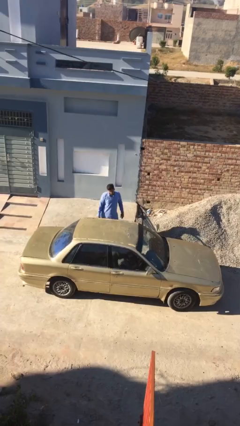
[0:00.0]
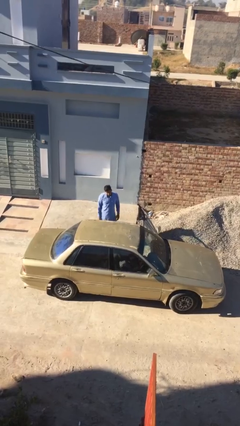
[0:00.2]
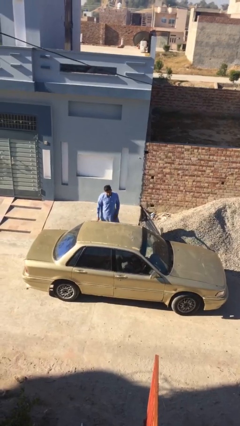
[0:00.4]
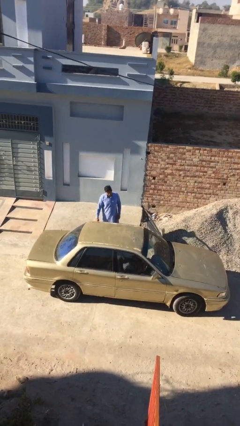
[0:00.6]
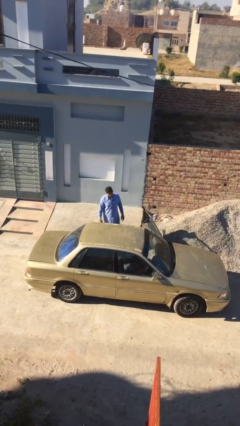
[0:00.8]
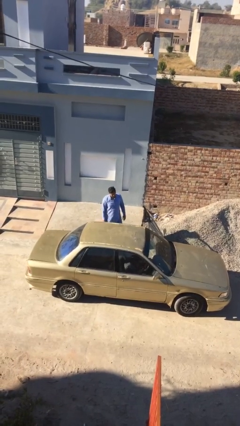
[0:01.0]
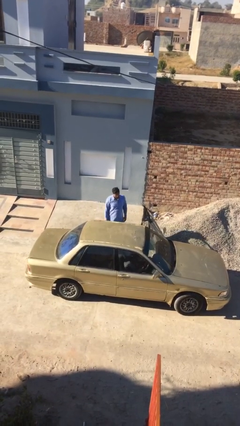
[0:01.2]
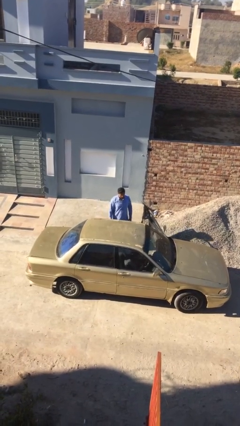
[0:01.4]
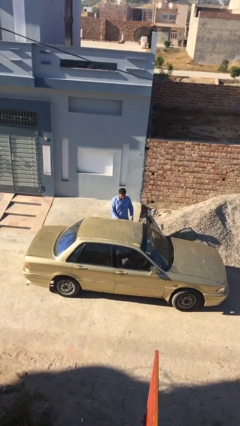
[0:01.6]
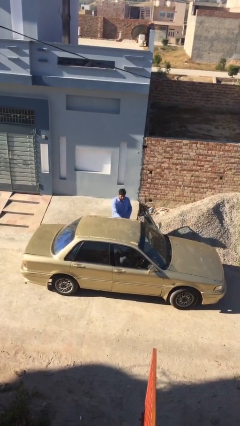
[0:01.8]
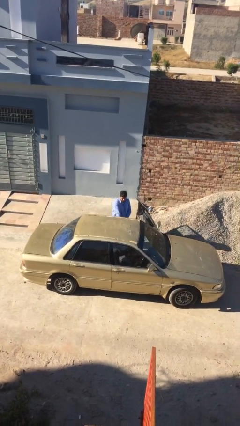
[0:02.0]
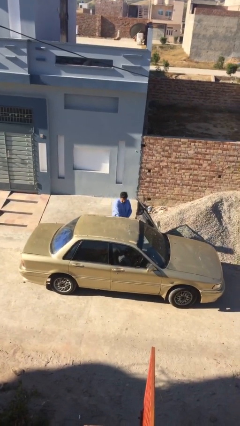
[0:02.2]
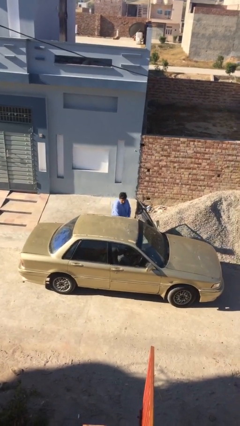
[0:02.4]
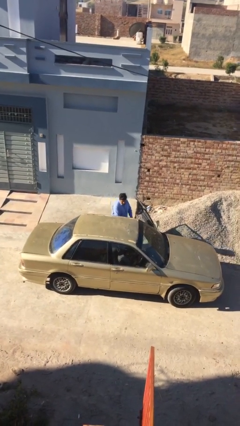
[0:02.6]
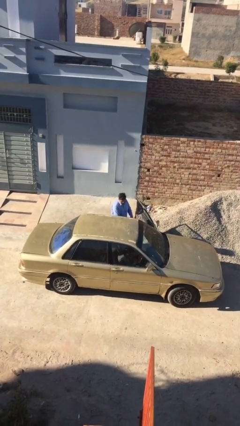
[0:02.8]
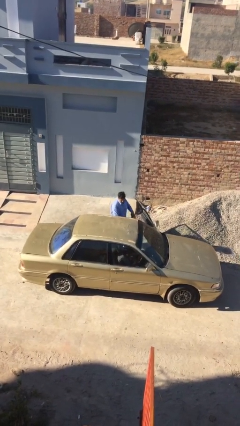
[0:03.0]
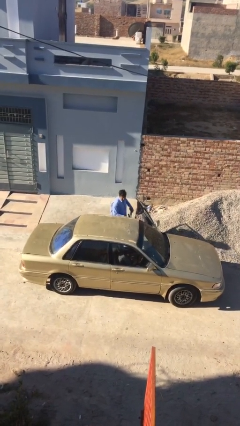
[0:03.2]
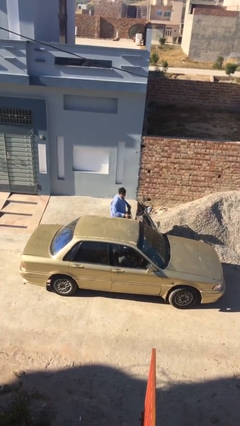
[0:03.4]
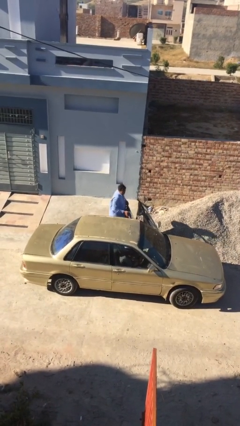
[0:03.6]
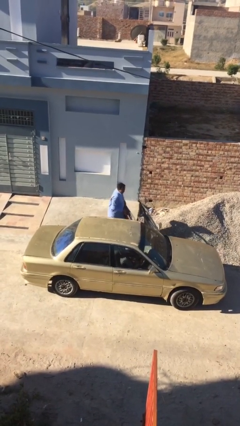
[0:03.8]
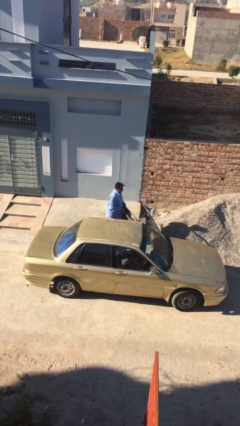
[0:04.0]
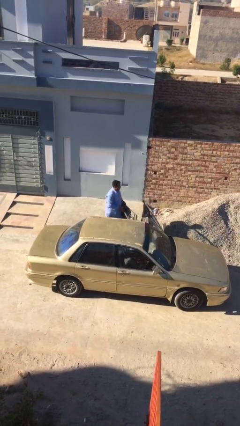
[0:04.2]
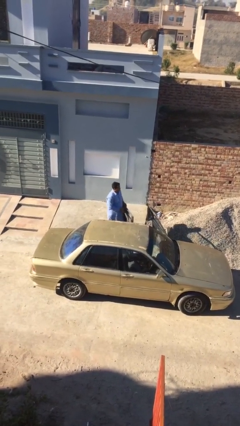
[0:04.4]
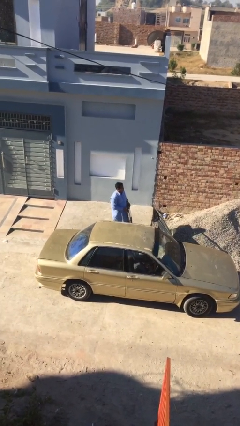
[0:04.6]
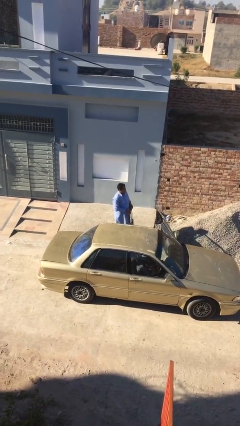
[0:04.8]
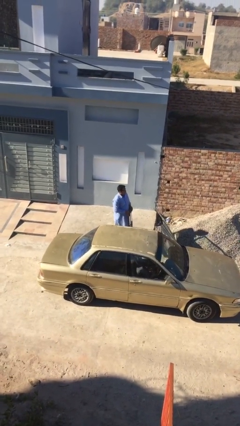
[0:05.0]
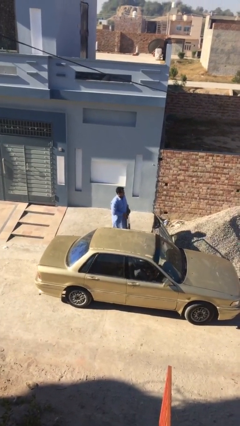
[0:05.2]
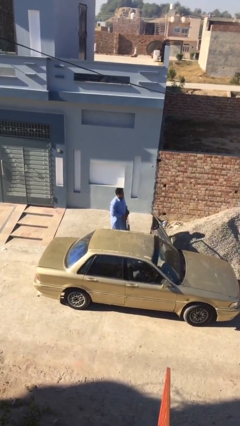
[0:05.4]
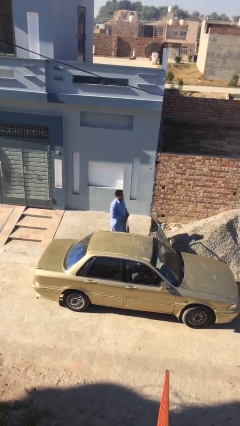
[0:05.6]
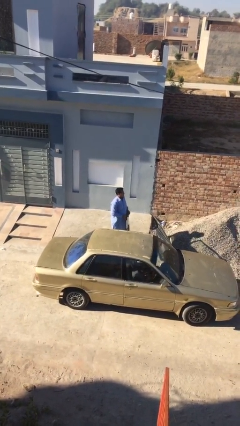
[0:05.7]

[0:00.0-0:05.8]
person unloads car

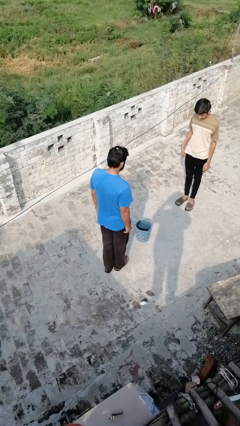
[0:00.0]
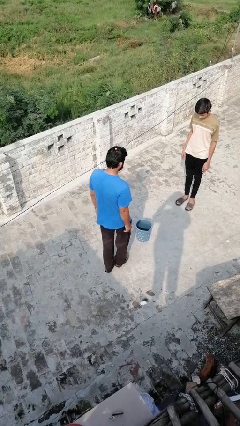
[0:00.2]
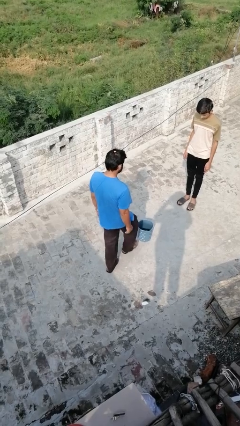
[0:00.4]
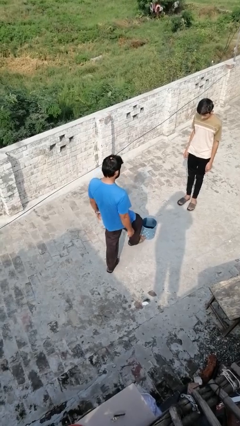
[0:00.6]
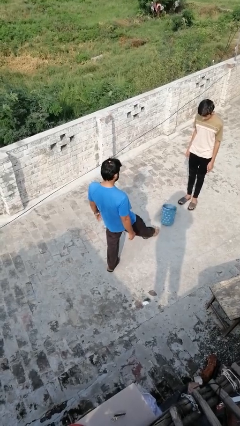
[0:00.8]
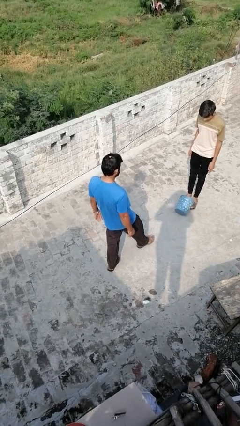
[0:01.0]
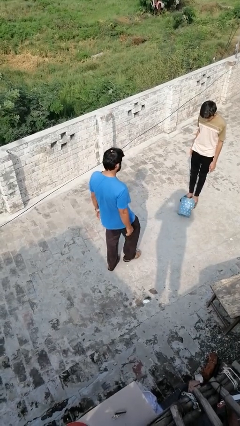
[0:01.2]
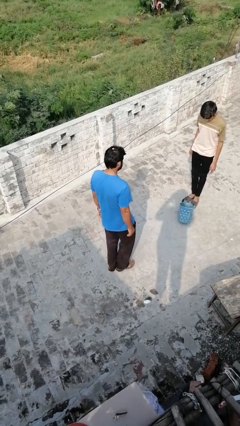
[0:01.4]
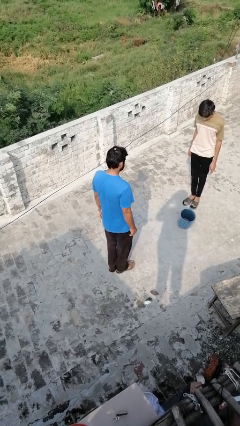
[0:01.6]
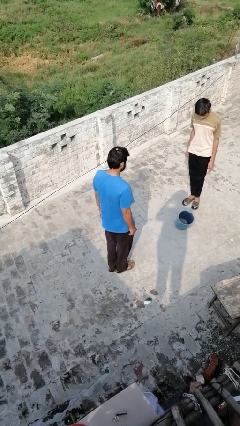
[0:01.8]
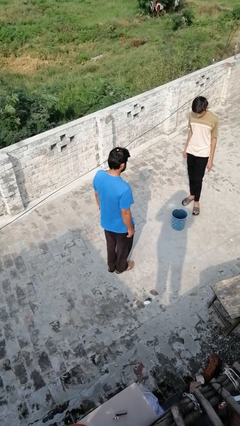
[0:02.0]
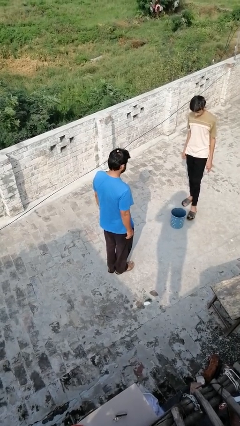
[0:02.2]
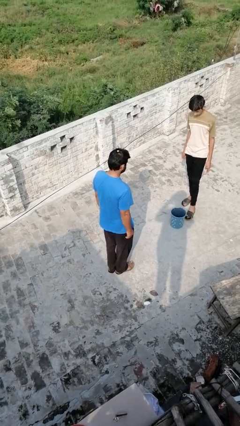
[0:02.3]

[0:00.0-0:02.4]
person kicks object to person

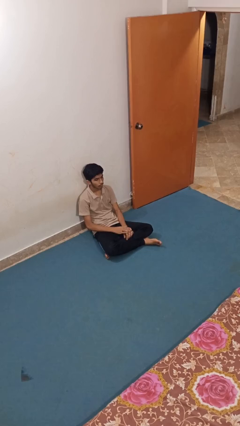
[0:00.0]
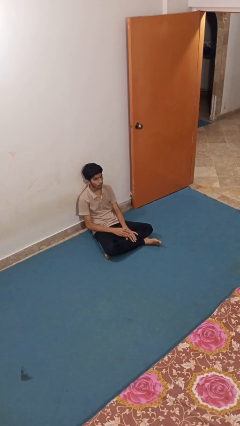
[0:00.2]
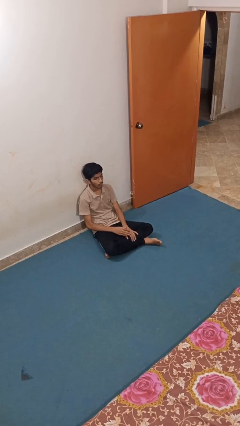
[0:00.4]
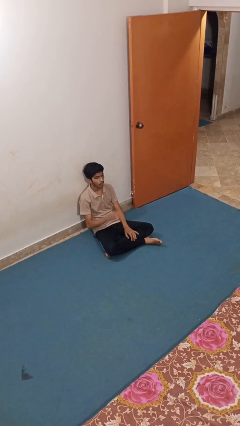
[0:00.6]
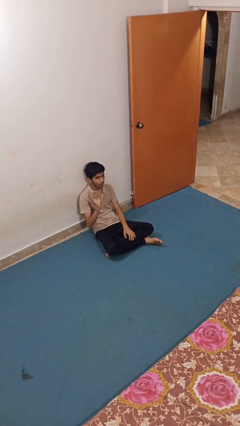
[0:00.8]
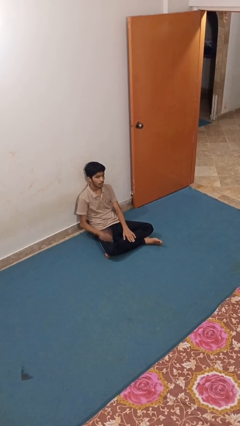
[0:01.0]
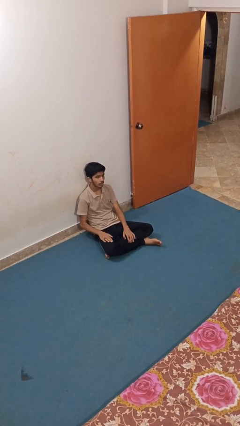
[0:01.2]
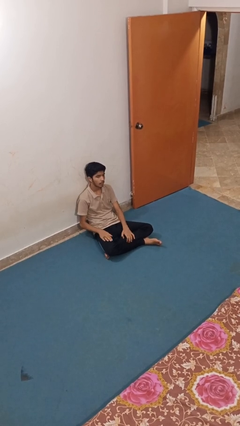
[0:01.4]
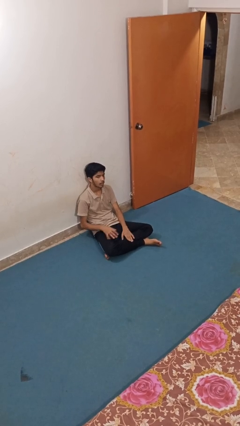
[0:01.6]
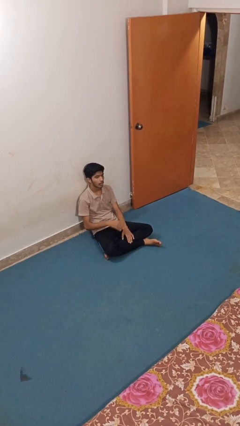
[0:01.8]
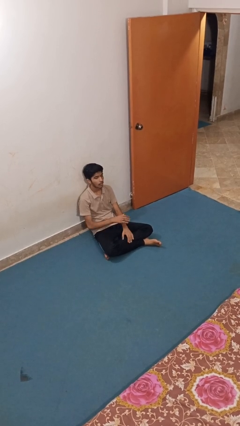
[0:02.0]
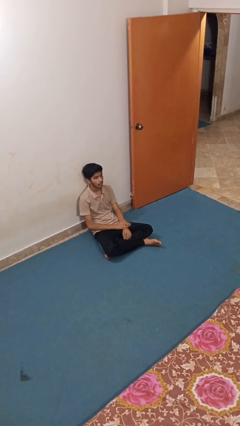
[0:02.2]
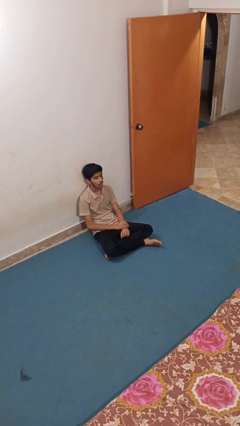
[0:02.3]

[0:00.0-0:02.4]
person slaps hands on thighs

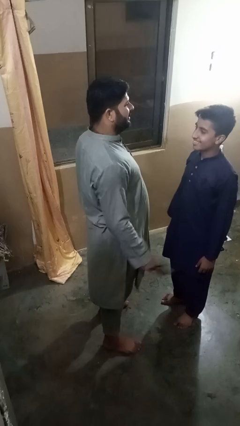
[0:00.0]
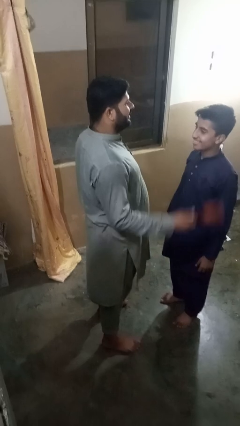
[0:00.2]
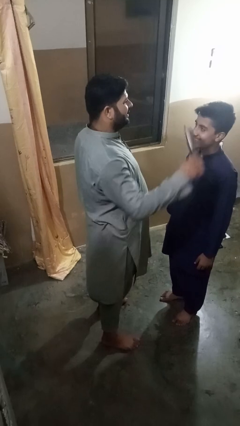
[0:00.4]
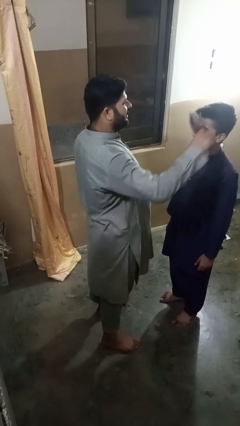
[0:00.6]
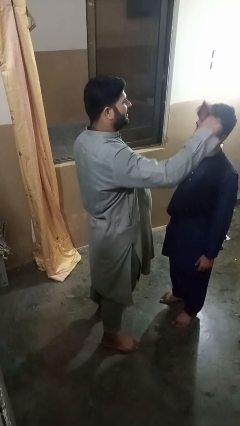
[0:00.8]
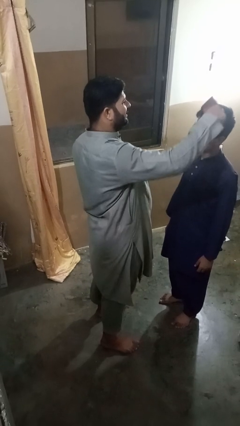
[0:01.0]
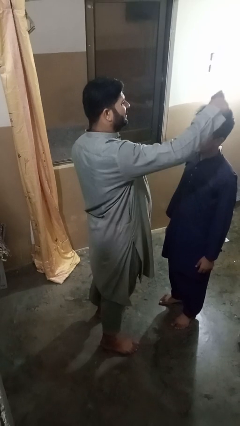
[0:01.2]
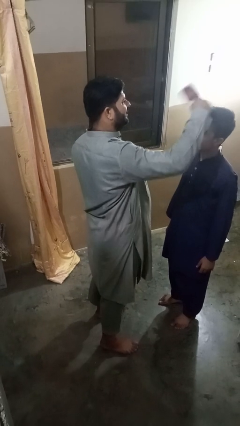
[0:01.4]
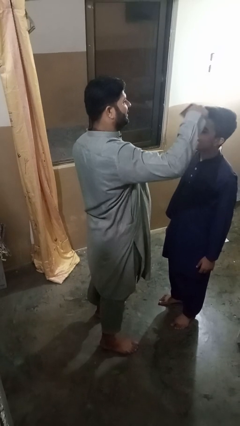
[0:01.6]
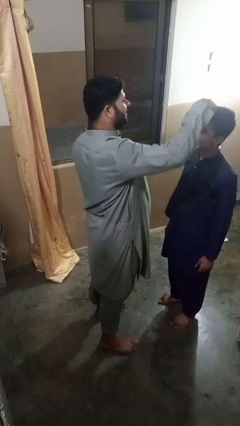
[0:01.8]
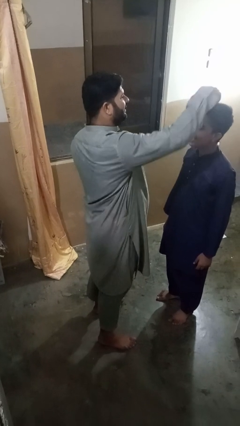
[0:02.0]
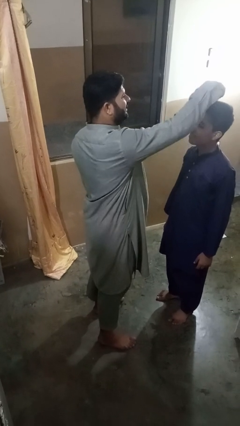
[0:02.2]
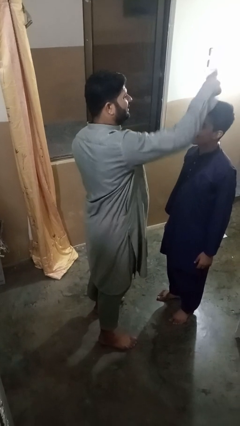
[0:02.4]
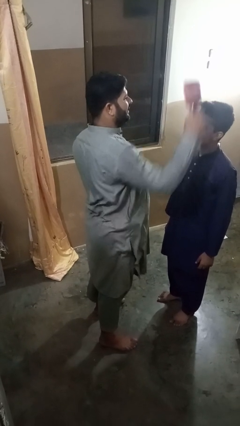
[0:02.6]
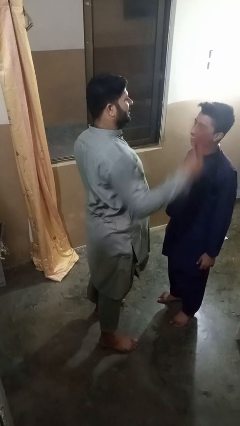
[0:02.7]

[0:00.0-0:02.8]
person brushes hair of person

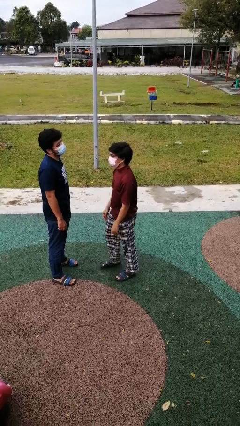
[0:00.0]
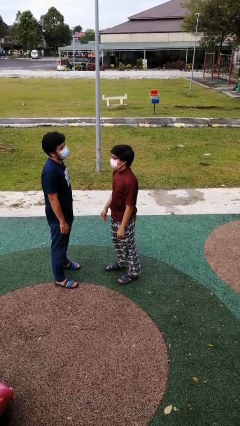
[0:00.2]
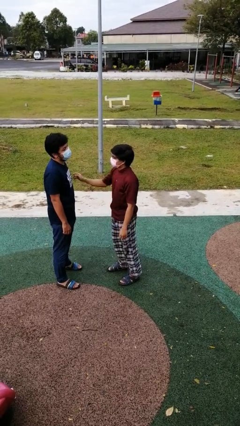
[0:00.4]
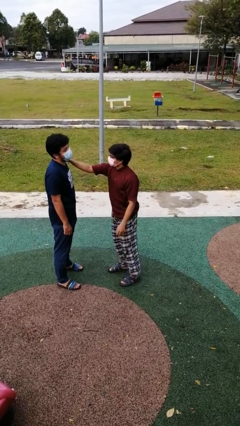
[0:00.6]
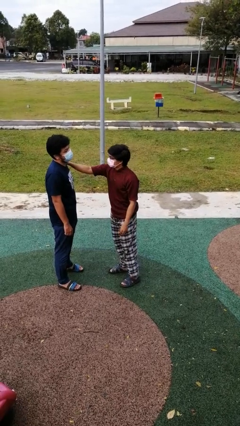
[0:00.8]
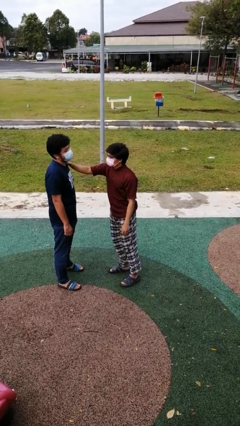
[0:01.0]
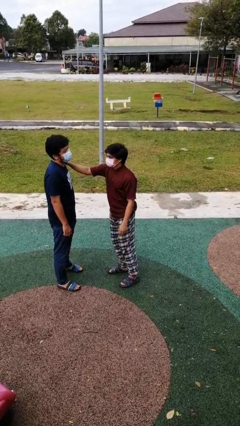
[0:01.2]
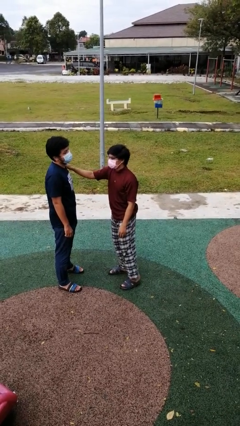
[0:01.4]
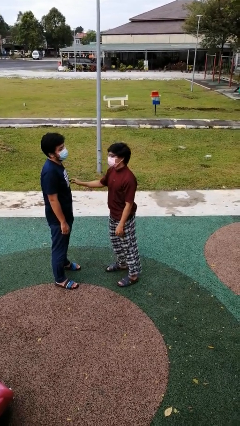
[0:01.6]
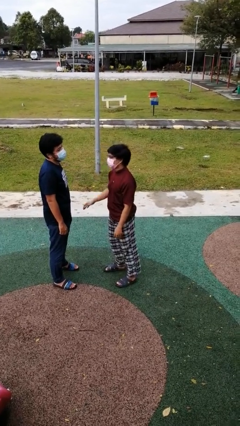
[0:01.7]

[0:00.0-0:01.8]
person pounds shoulders of person

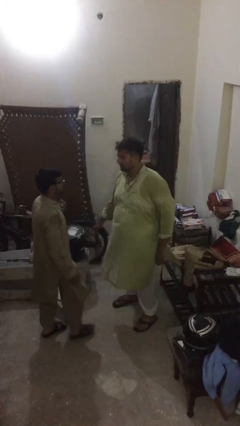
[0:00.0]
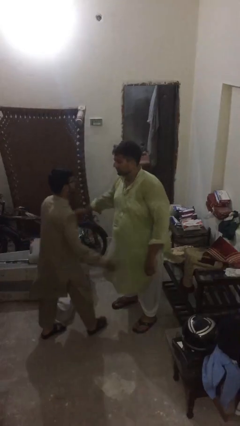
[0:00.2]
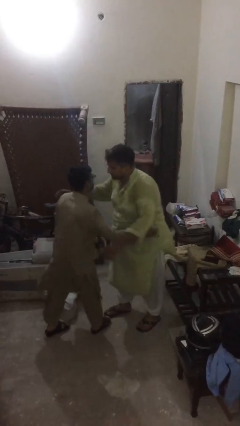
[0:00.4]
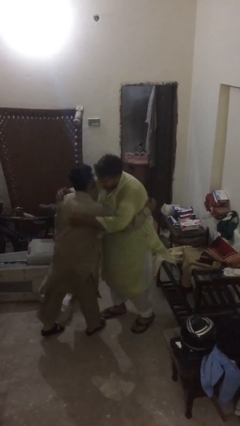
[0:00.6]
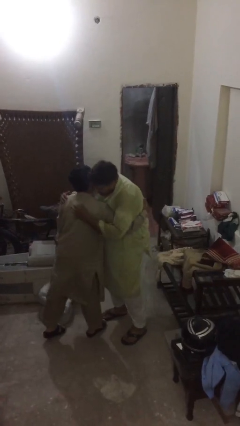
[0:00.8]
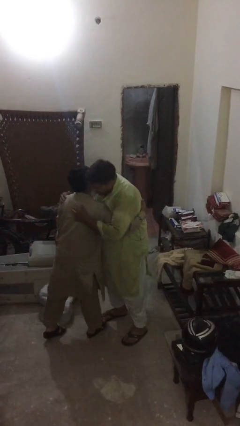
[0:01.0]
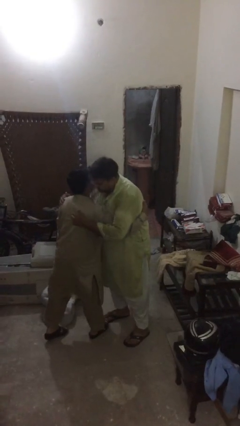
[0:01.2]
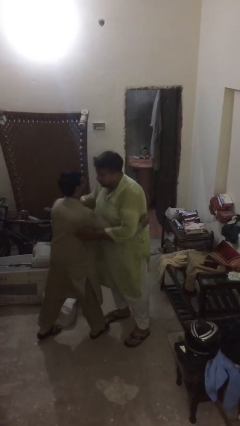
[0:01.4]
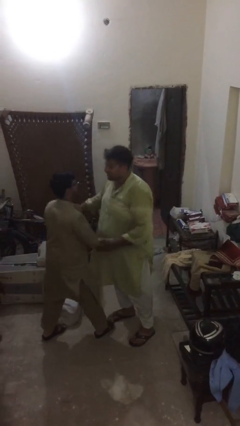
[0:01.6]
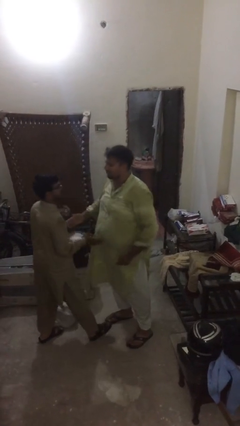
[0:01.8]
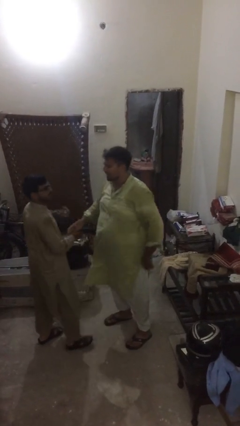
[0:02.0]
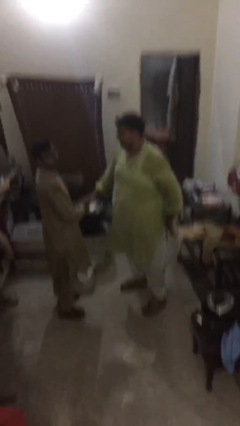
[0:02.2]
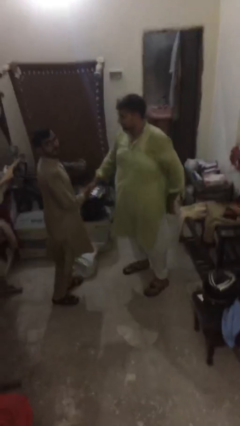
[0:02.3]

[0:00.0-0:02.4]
person embraces person
